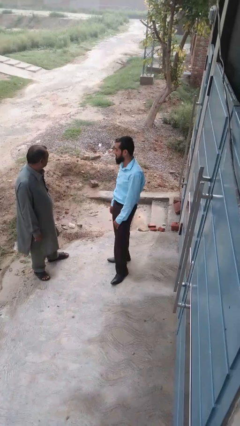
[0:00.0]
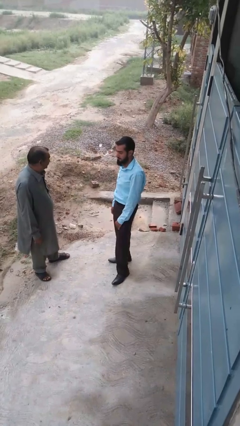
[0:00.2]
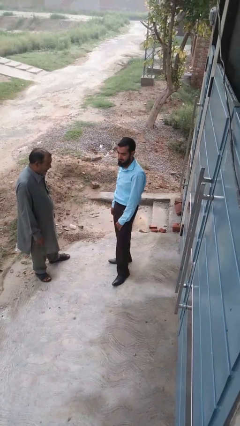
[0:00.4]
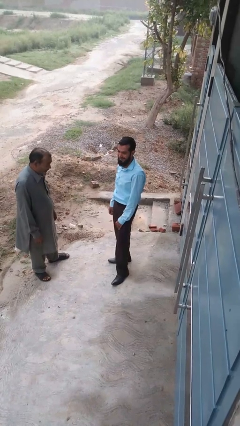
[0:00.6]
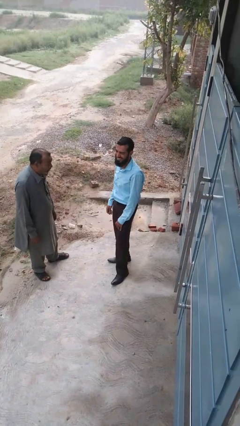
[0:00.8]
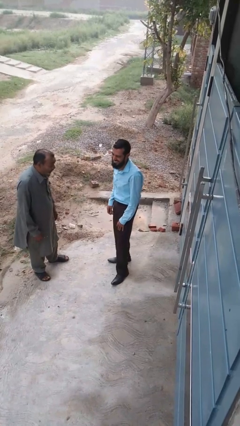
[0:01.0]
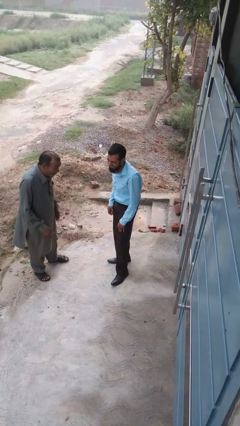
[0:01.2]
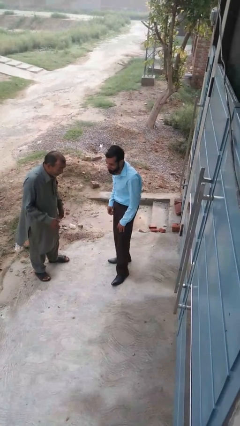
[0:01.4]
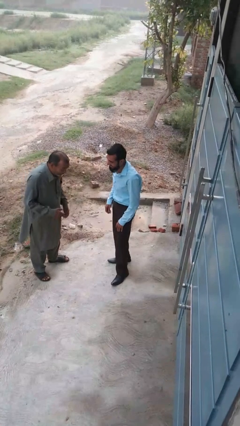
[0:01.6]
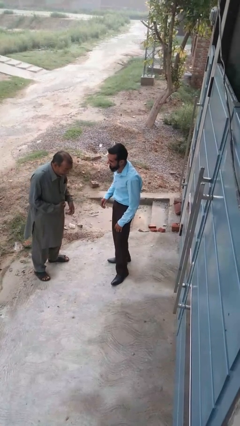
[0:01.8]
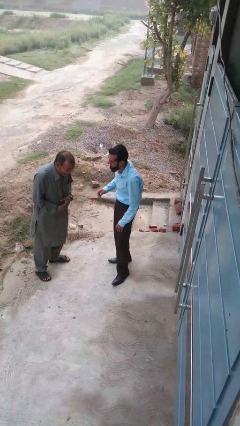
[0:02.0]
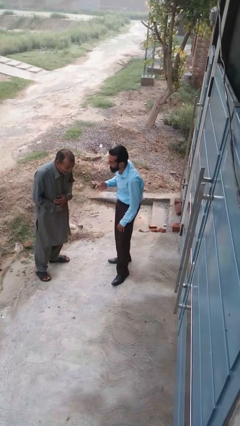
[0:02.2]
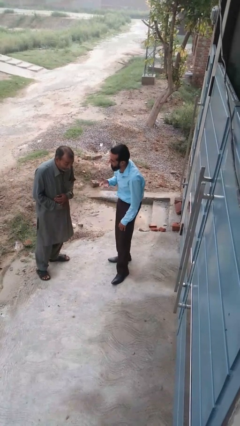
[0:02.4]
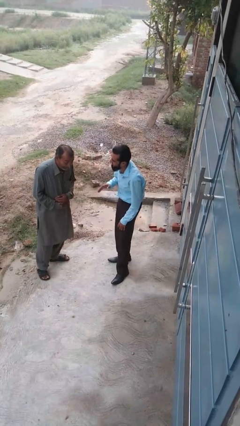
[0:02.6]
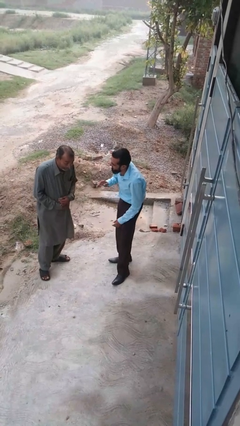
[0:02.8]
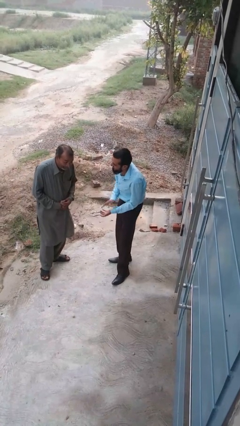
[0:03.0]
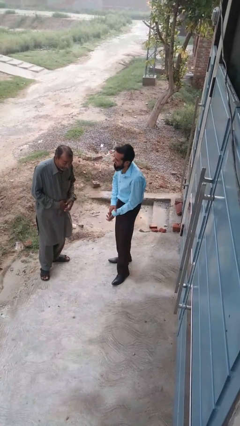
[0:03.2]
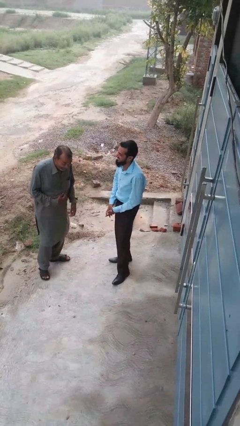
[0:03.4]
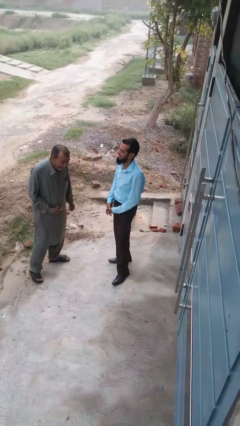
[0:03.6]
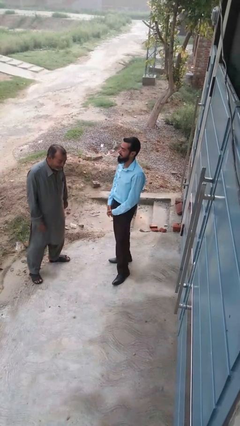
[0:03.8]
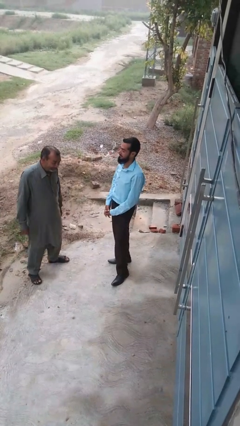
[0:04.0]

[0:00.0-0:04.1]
person laughs with person

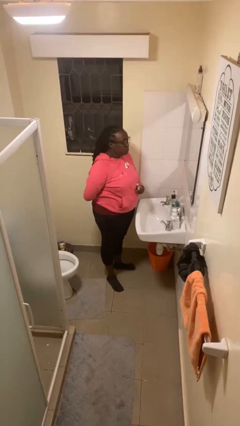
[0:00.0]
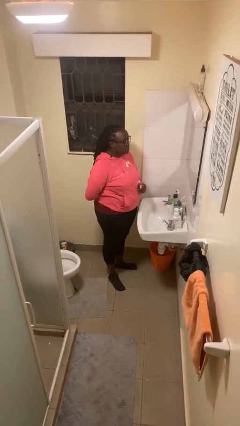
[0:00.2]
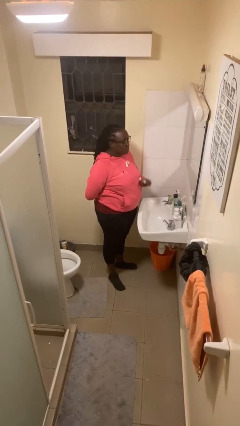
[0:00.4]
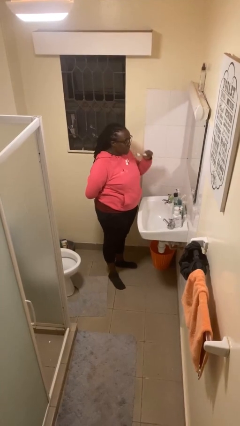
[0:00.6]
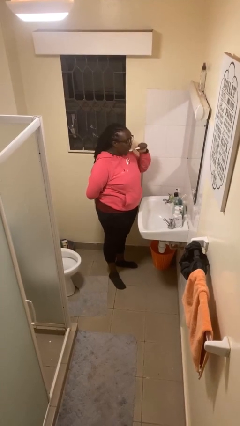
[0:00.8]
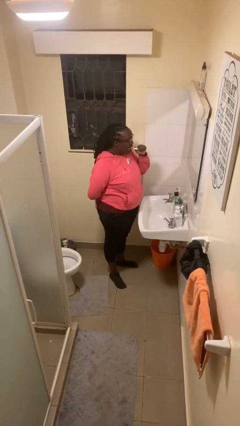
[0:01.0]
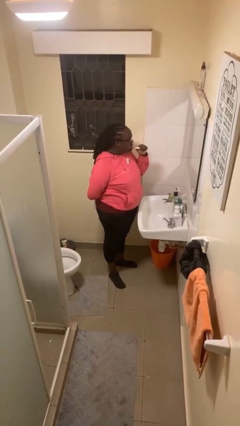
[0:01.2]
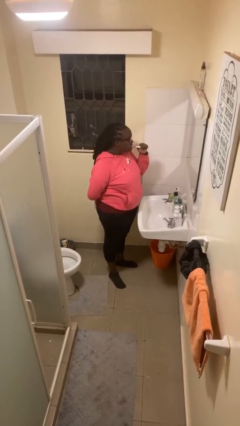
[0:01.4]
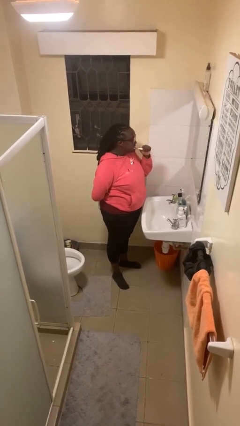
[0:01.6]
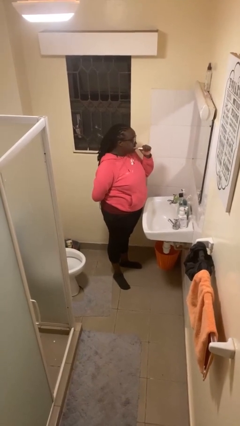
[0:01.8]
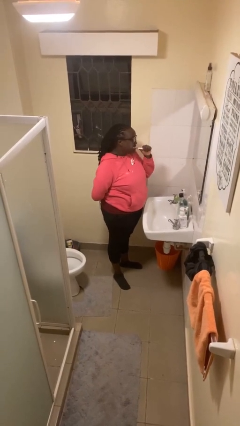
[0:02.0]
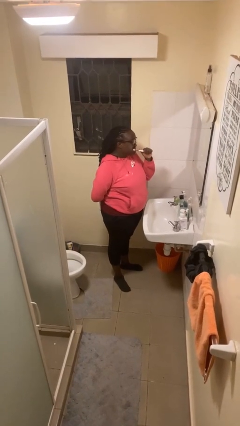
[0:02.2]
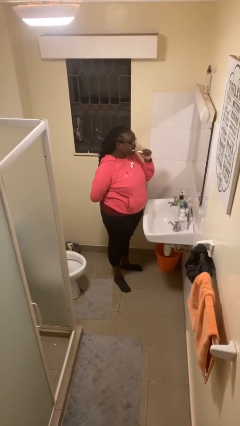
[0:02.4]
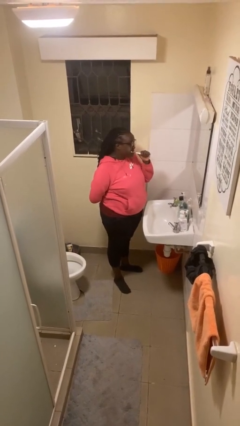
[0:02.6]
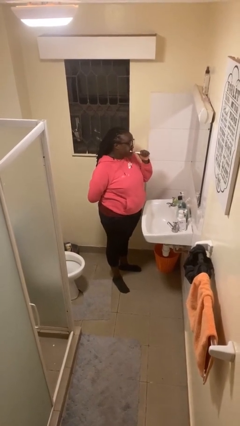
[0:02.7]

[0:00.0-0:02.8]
person brushes teeth

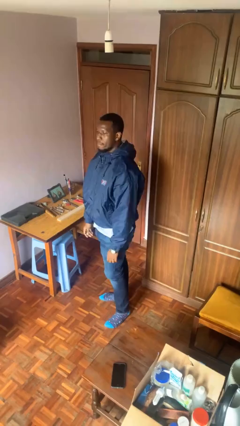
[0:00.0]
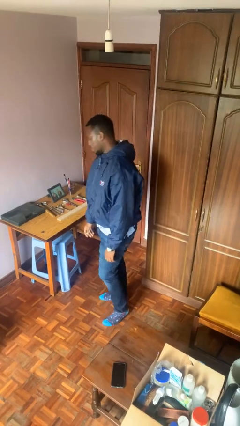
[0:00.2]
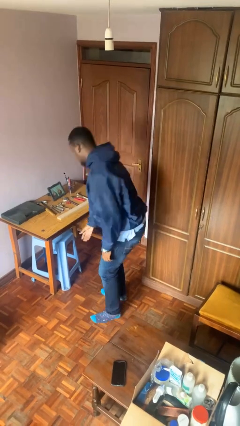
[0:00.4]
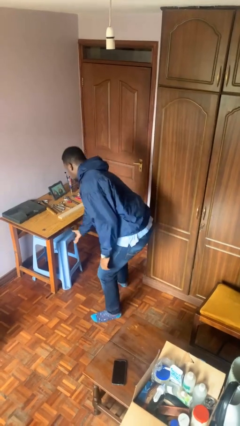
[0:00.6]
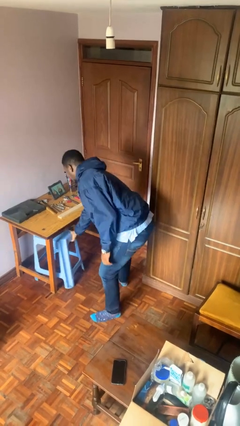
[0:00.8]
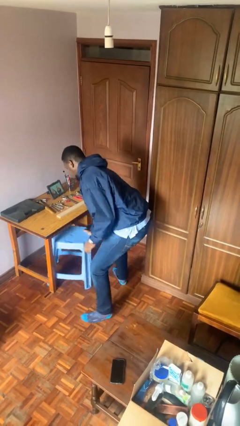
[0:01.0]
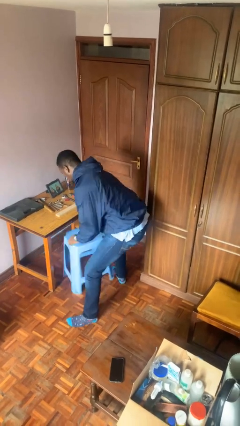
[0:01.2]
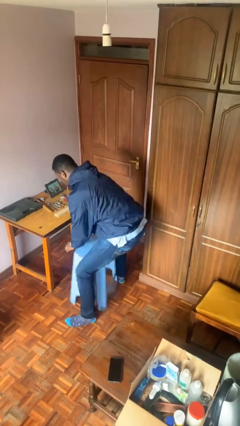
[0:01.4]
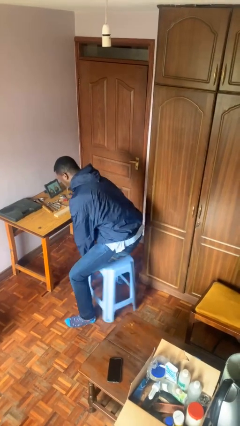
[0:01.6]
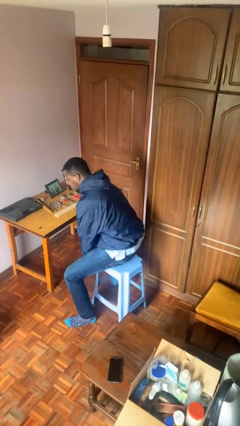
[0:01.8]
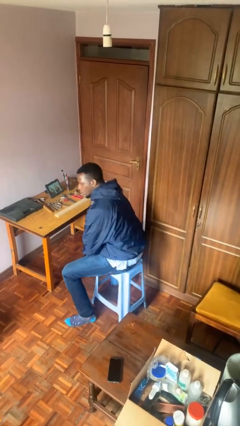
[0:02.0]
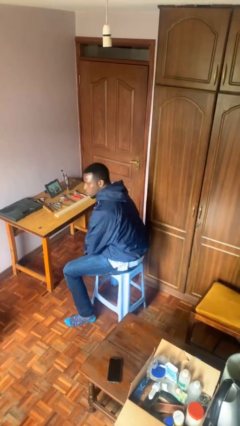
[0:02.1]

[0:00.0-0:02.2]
person sits down

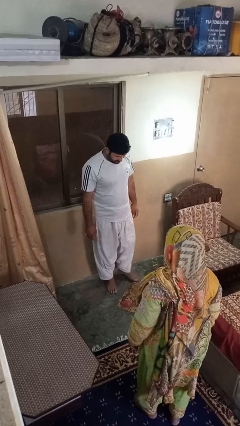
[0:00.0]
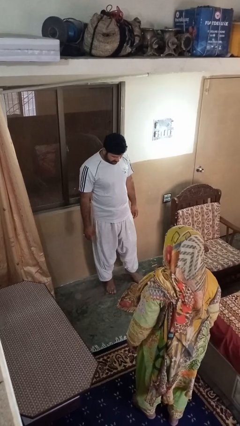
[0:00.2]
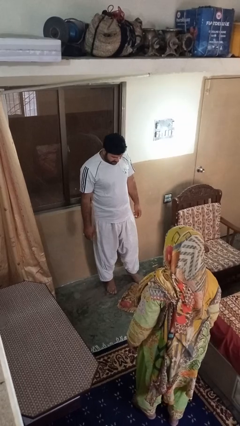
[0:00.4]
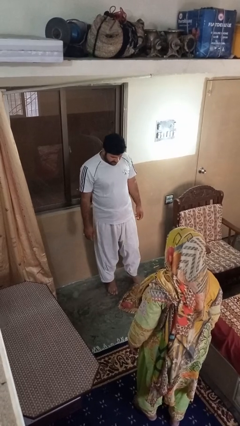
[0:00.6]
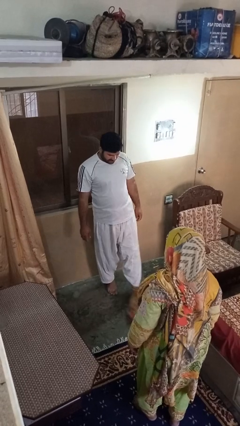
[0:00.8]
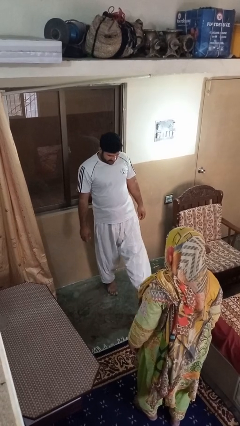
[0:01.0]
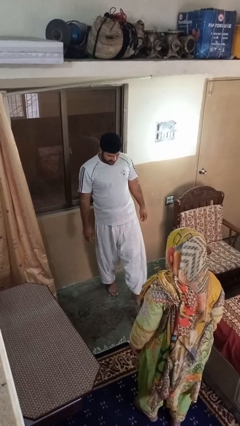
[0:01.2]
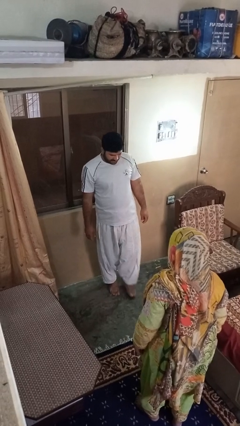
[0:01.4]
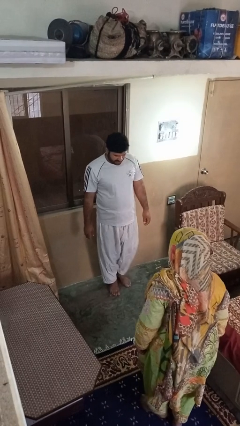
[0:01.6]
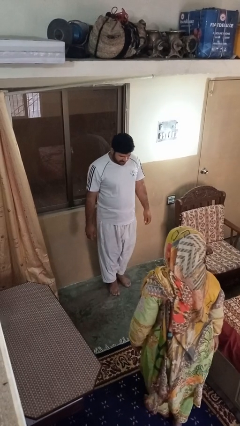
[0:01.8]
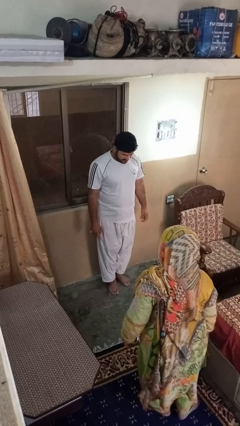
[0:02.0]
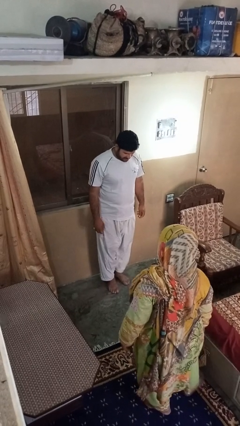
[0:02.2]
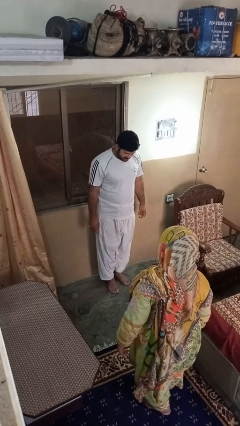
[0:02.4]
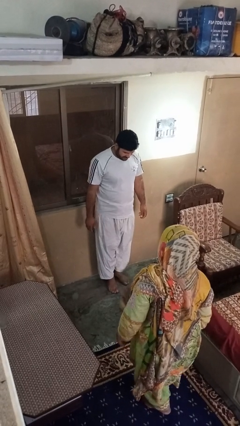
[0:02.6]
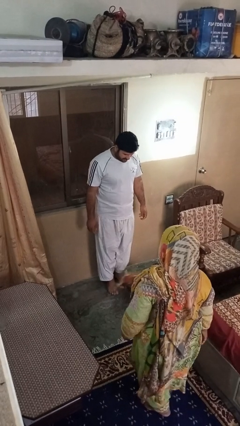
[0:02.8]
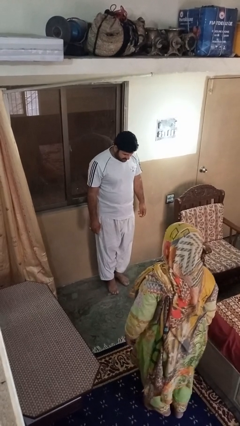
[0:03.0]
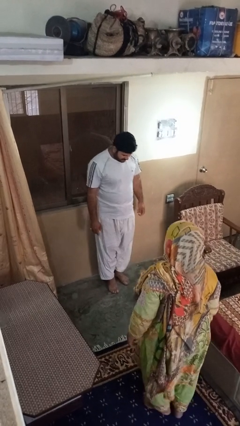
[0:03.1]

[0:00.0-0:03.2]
person kicks object to person

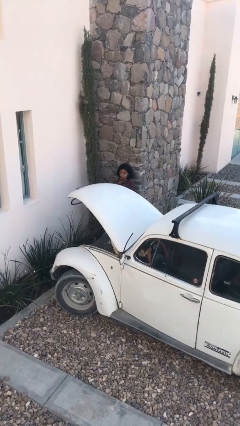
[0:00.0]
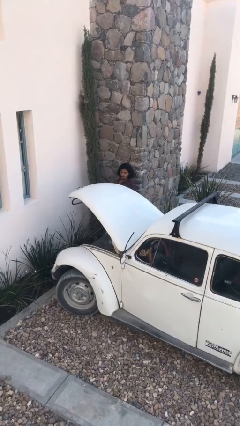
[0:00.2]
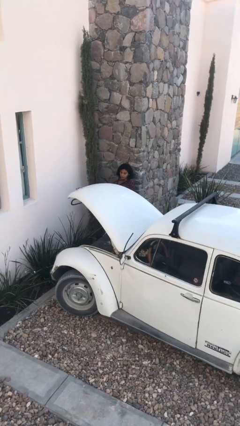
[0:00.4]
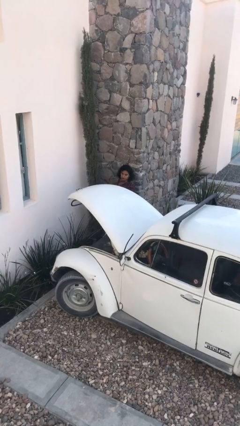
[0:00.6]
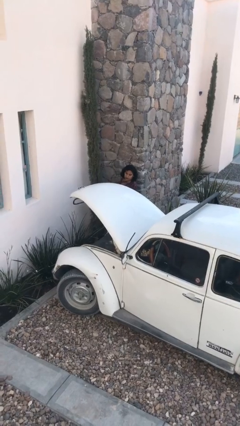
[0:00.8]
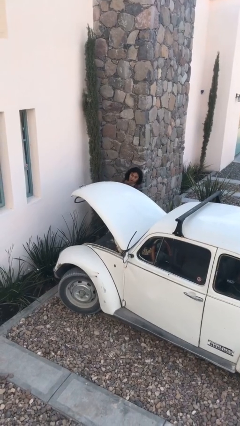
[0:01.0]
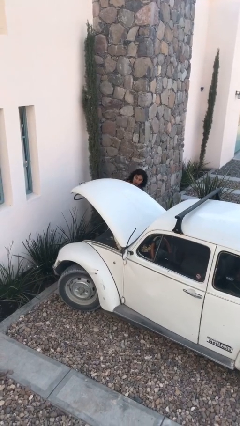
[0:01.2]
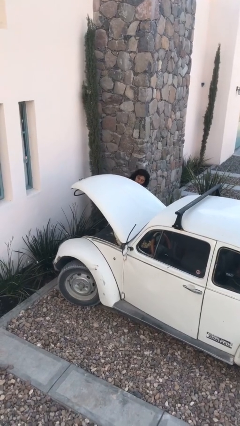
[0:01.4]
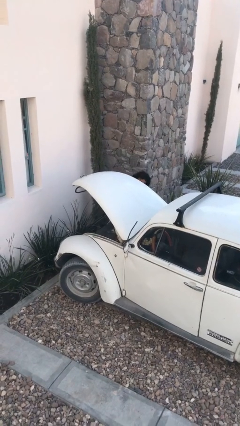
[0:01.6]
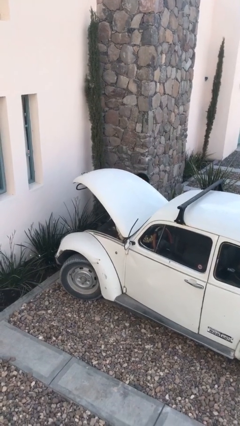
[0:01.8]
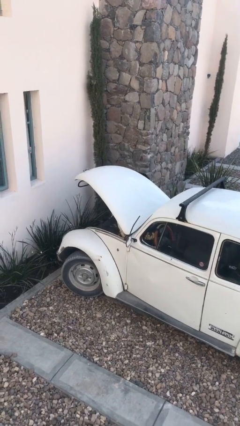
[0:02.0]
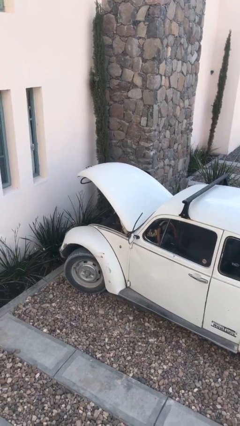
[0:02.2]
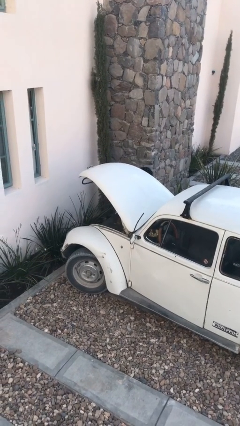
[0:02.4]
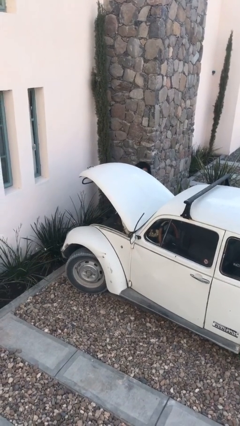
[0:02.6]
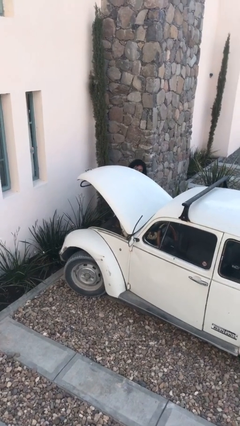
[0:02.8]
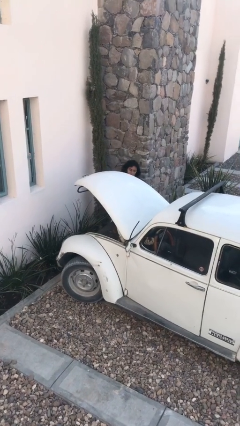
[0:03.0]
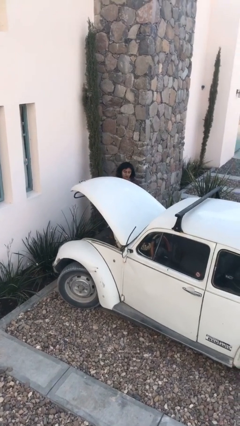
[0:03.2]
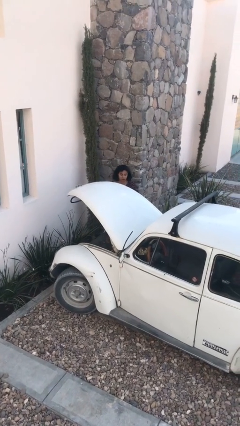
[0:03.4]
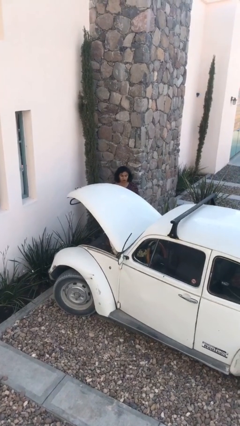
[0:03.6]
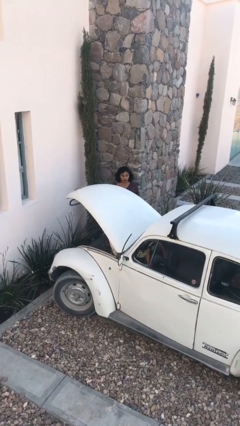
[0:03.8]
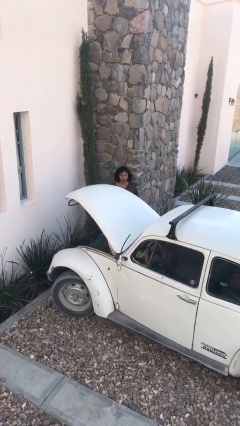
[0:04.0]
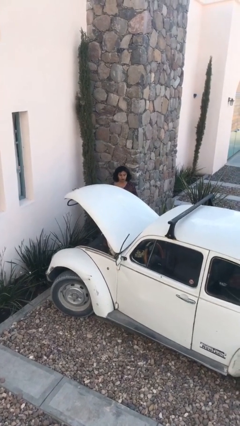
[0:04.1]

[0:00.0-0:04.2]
person loads car

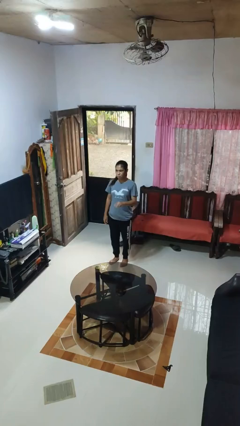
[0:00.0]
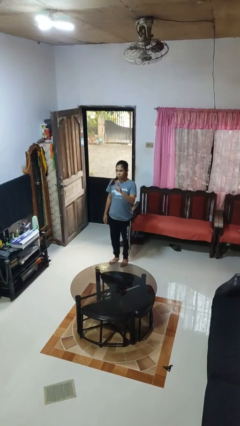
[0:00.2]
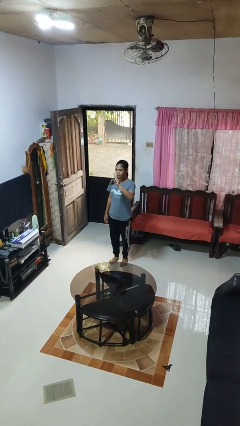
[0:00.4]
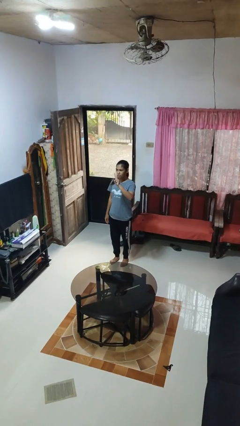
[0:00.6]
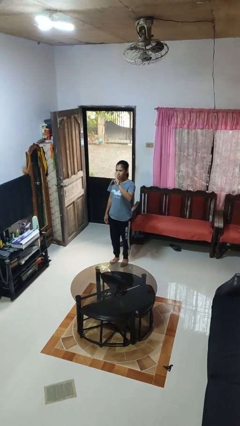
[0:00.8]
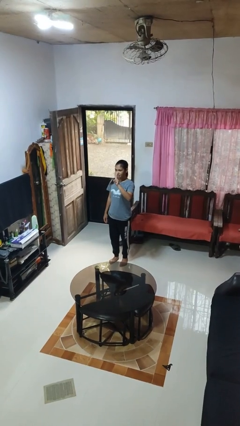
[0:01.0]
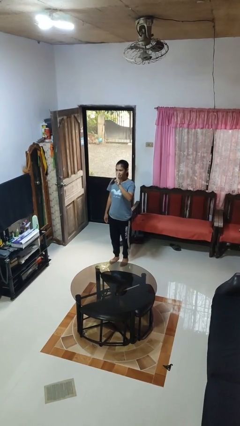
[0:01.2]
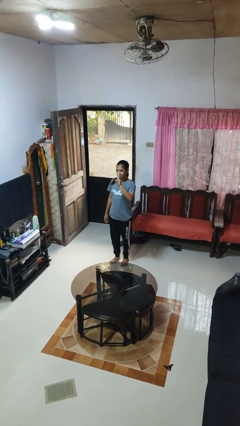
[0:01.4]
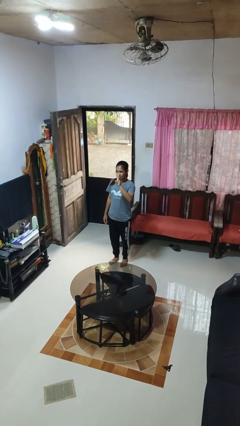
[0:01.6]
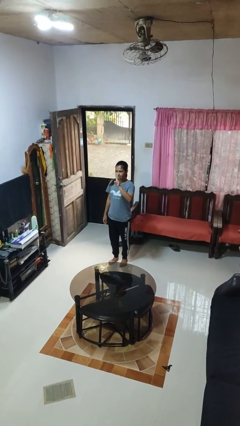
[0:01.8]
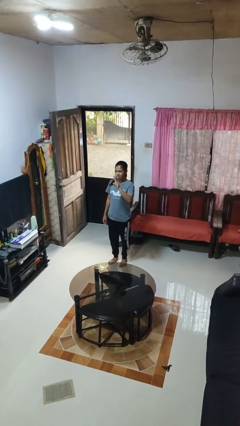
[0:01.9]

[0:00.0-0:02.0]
person gestures number three
